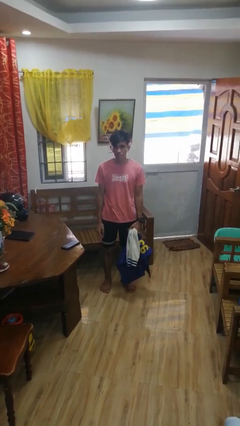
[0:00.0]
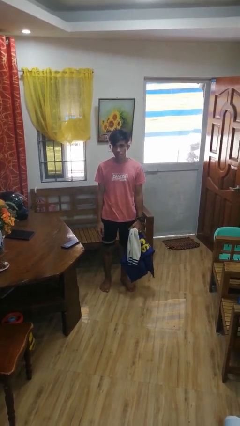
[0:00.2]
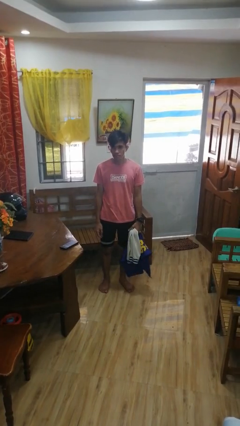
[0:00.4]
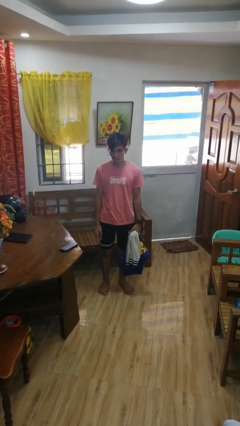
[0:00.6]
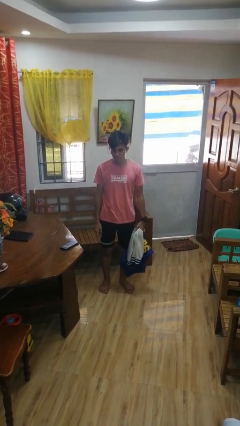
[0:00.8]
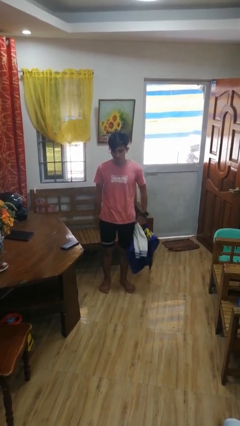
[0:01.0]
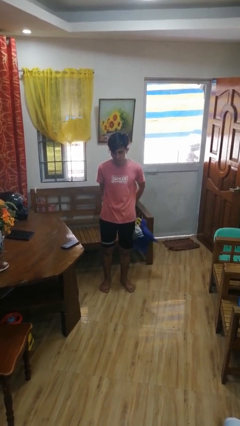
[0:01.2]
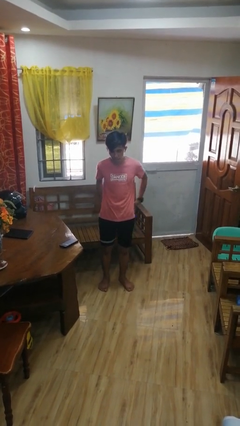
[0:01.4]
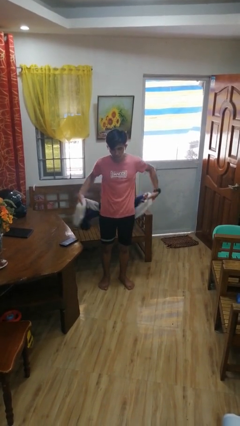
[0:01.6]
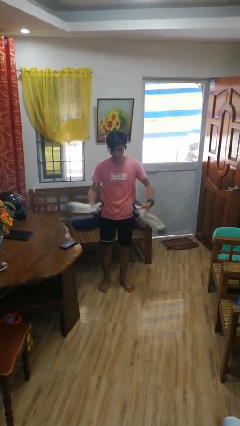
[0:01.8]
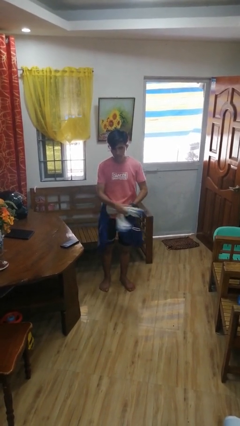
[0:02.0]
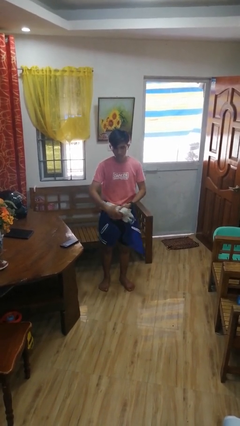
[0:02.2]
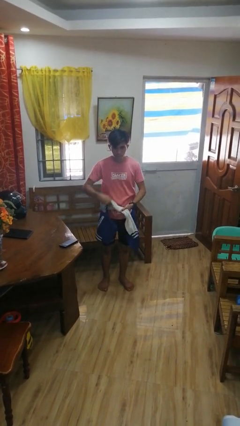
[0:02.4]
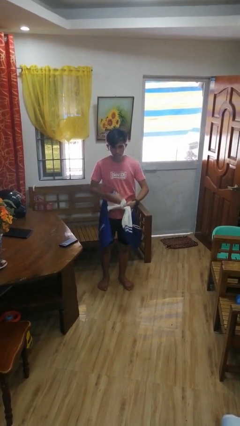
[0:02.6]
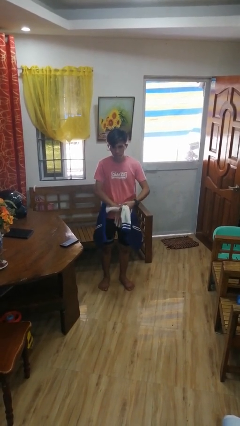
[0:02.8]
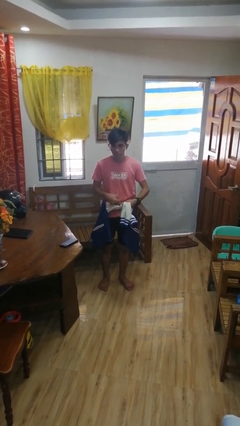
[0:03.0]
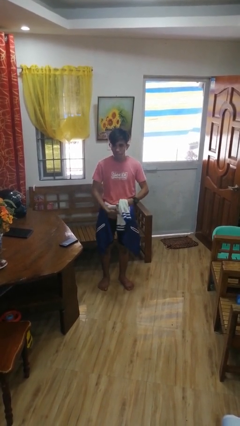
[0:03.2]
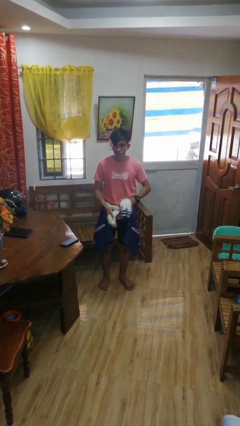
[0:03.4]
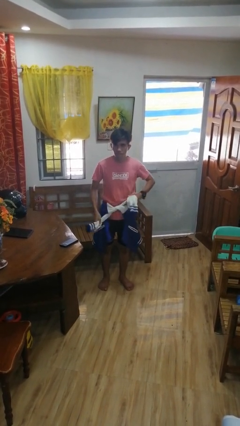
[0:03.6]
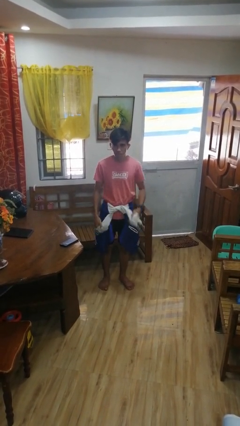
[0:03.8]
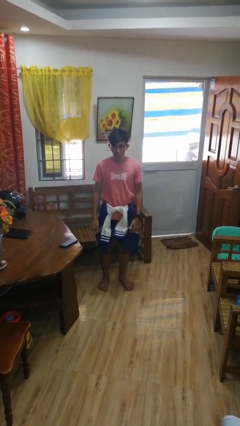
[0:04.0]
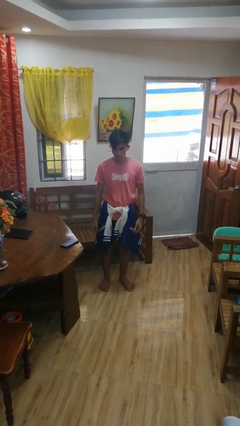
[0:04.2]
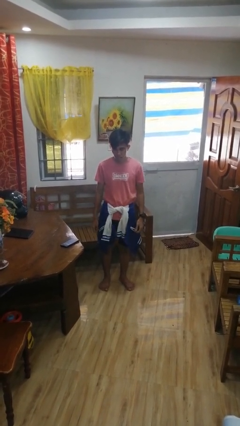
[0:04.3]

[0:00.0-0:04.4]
person ties jacket around waist

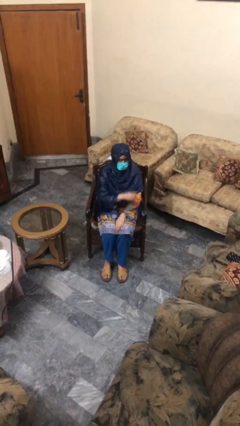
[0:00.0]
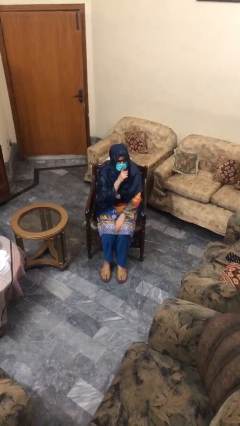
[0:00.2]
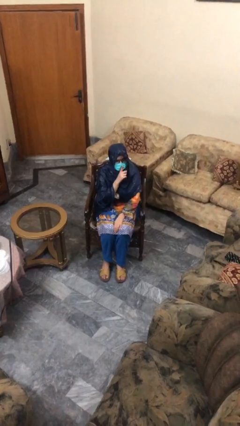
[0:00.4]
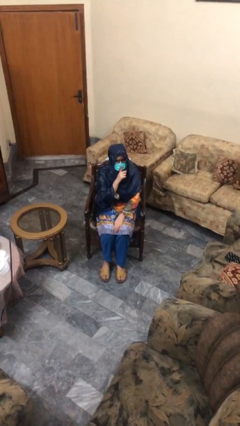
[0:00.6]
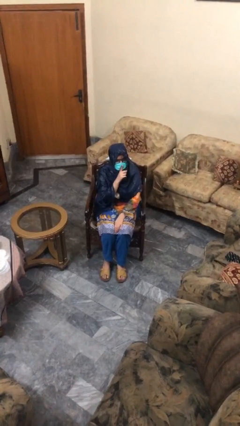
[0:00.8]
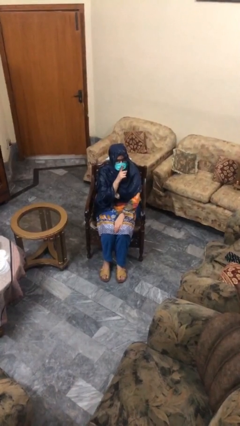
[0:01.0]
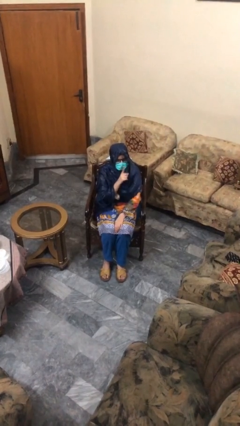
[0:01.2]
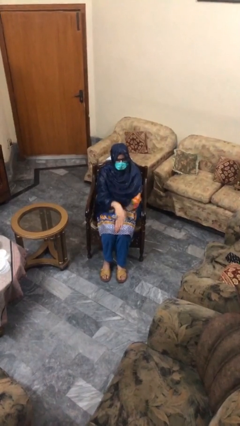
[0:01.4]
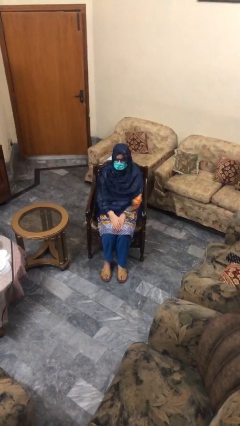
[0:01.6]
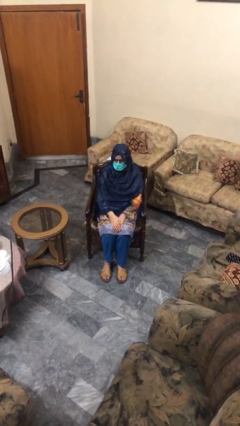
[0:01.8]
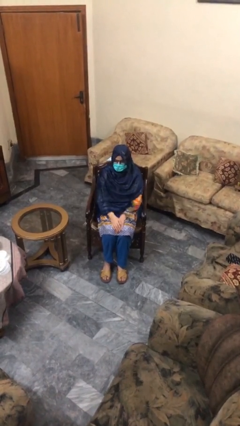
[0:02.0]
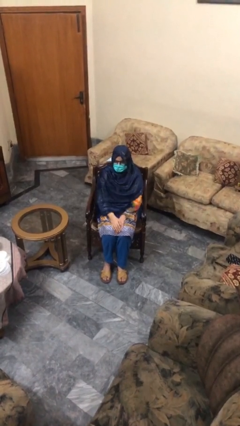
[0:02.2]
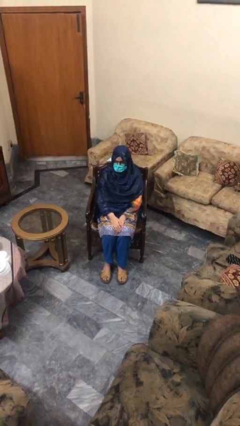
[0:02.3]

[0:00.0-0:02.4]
person gestures be quiet

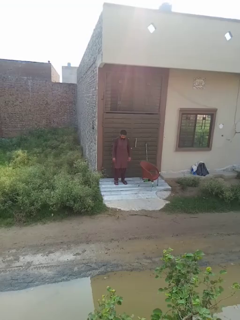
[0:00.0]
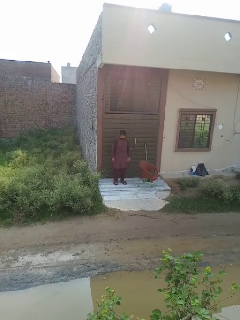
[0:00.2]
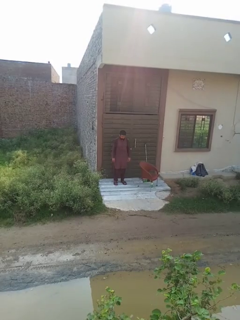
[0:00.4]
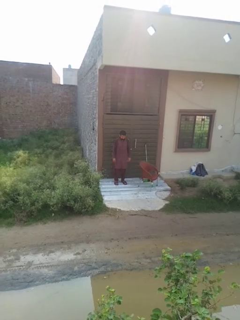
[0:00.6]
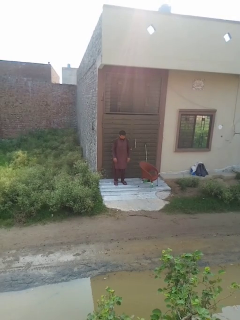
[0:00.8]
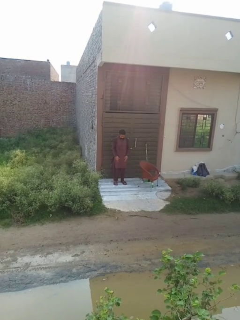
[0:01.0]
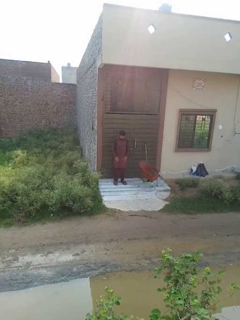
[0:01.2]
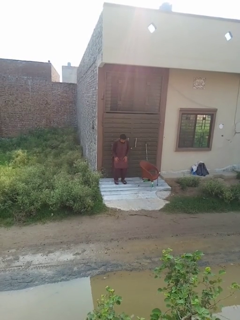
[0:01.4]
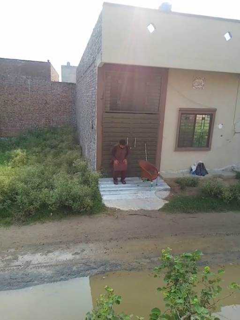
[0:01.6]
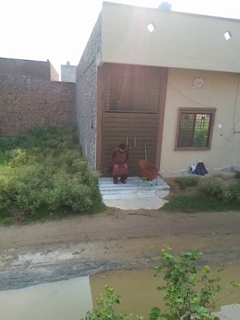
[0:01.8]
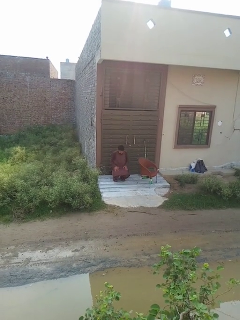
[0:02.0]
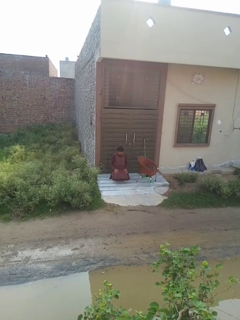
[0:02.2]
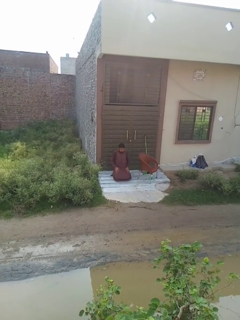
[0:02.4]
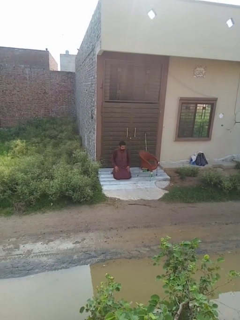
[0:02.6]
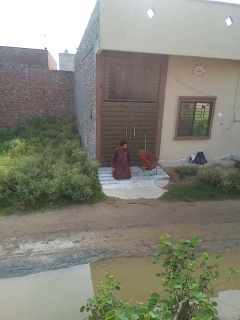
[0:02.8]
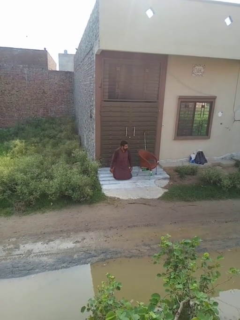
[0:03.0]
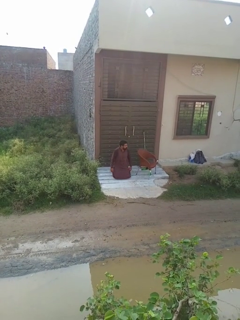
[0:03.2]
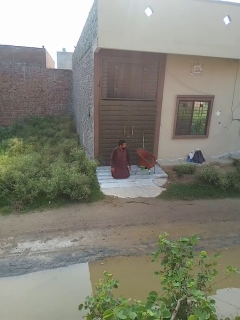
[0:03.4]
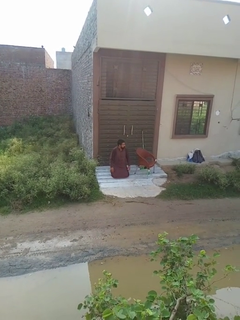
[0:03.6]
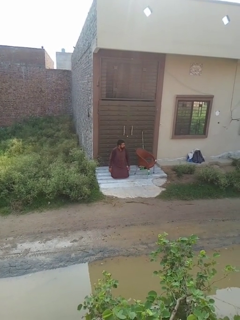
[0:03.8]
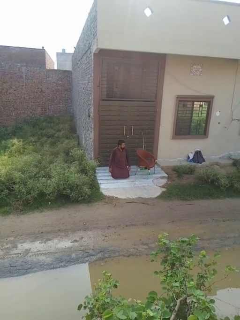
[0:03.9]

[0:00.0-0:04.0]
person kneels

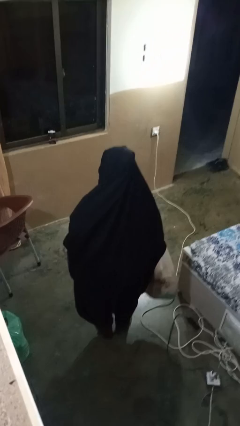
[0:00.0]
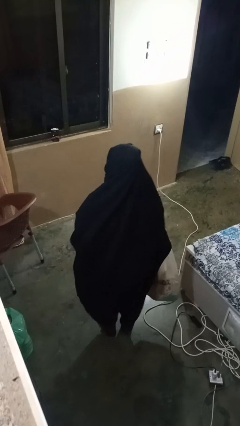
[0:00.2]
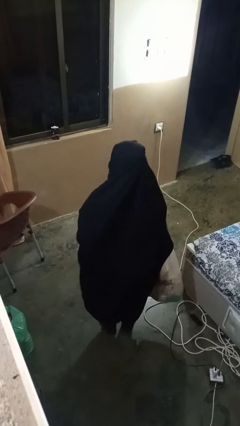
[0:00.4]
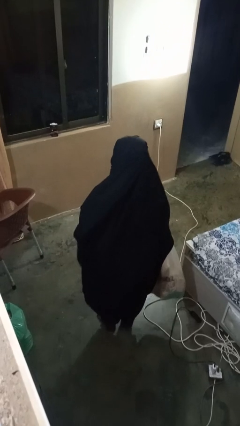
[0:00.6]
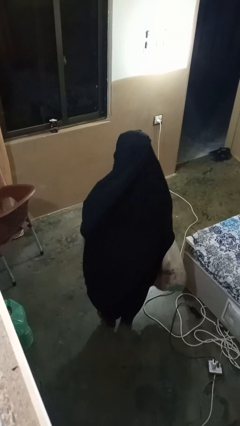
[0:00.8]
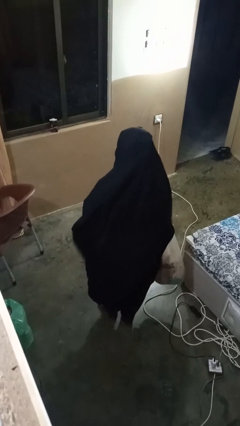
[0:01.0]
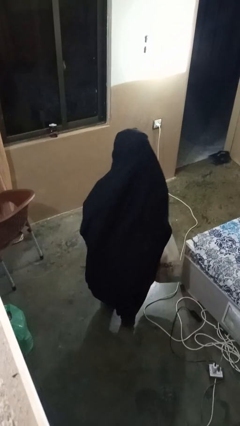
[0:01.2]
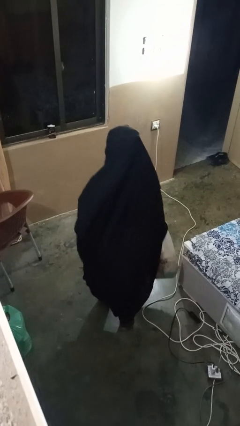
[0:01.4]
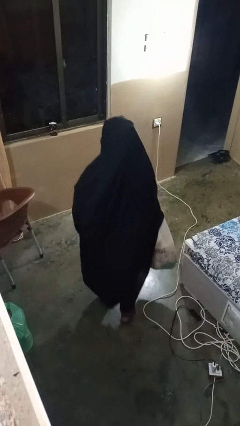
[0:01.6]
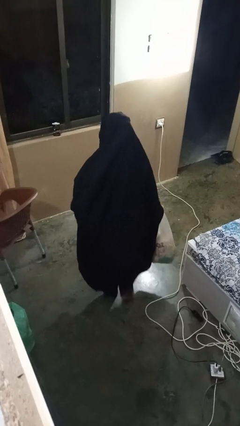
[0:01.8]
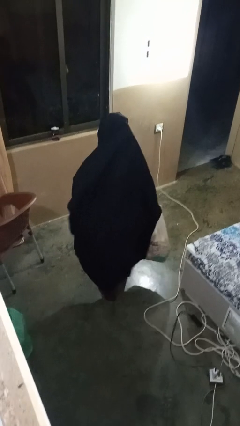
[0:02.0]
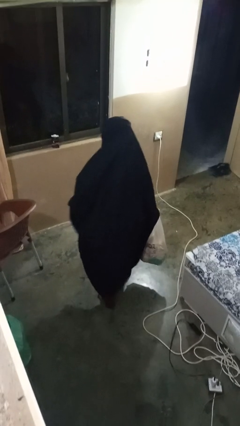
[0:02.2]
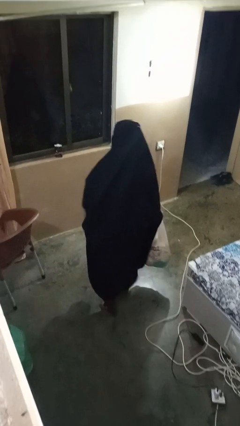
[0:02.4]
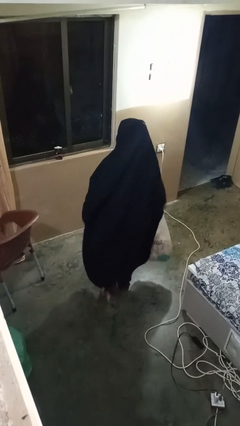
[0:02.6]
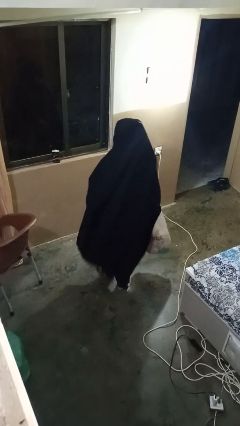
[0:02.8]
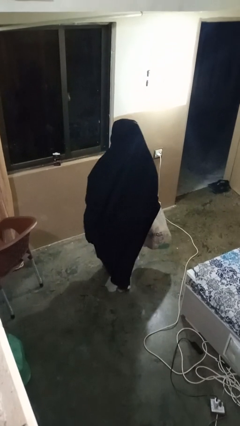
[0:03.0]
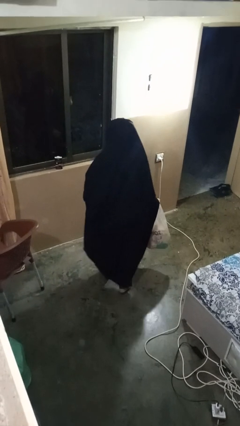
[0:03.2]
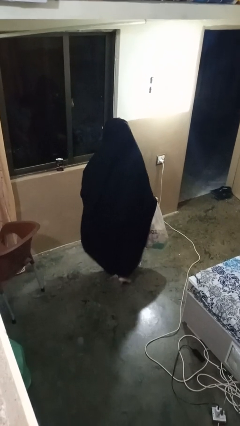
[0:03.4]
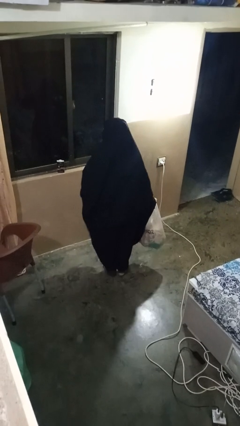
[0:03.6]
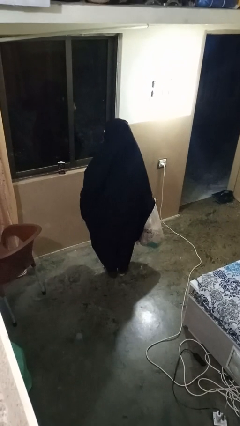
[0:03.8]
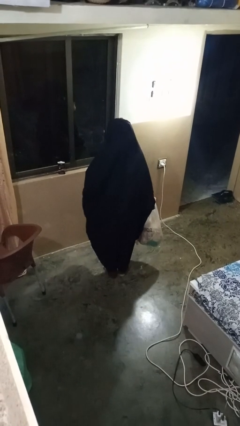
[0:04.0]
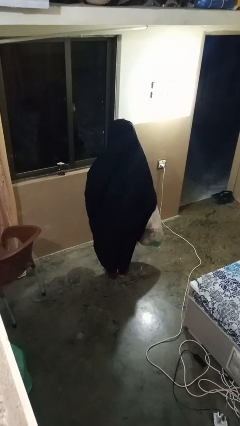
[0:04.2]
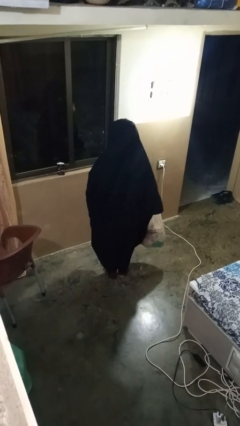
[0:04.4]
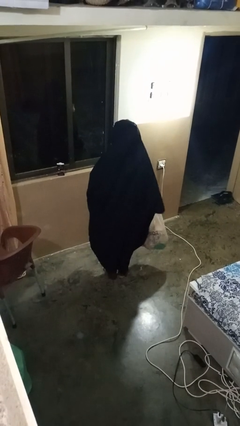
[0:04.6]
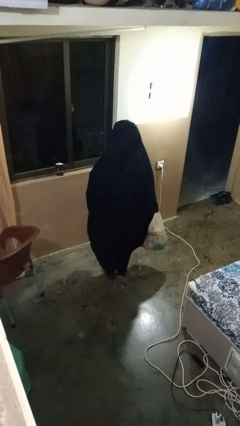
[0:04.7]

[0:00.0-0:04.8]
person carries groceries

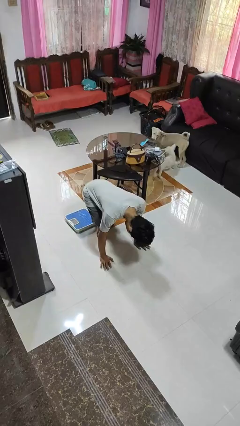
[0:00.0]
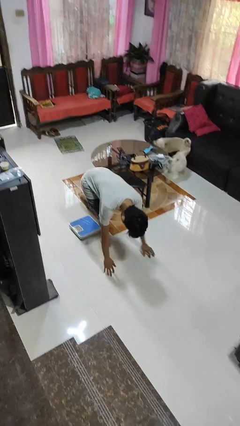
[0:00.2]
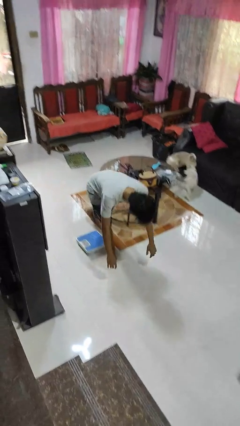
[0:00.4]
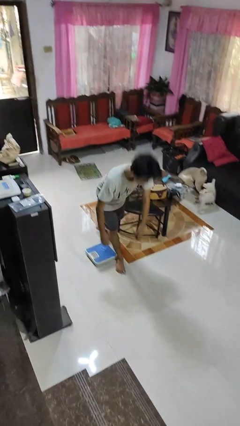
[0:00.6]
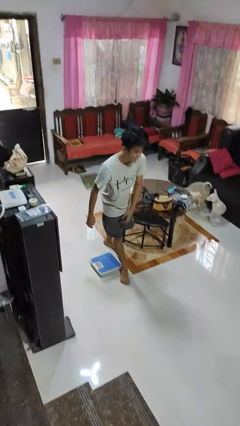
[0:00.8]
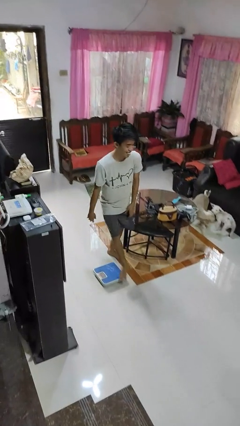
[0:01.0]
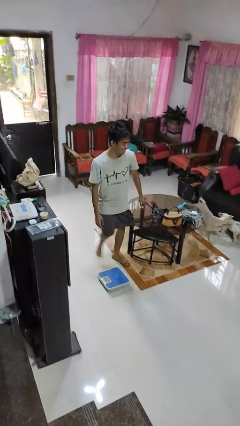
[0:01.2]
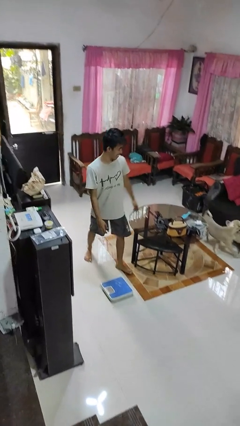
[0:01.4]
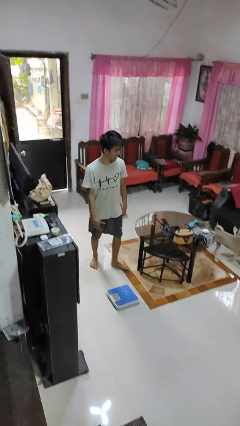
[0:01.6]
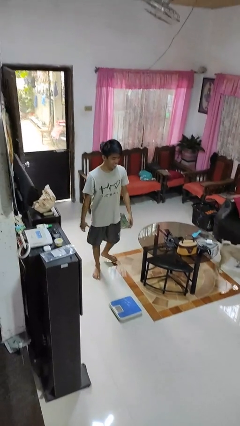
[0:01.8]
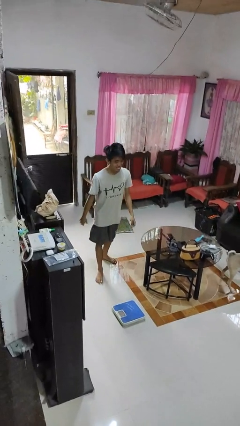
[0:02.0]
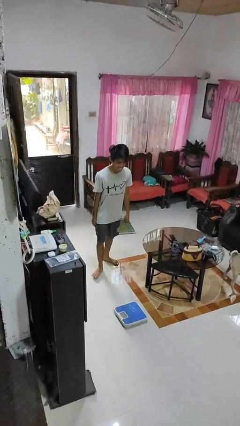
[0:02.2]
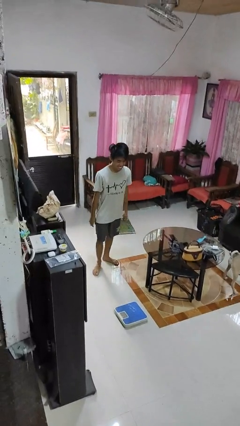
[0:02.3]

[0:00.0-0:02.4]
person stands up from floor

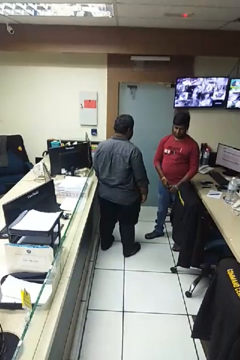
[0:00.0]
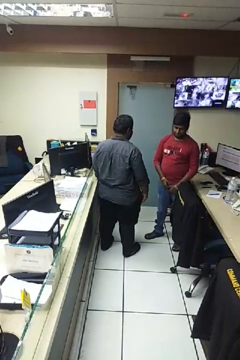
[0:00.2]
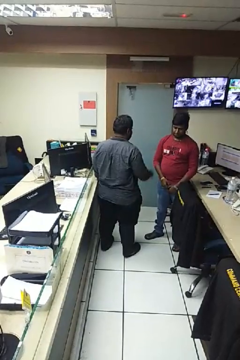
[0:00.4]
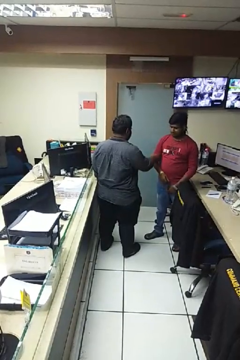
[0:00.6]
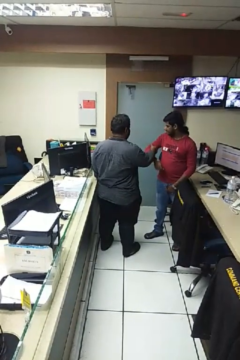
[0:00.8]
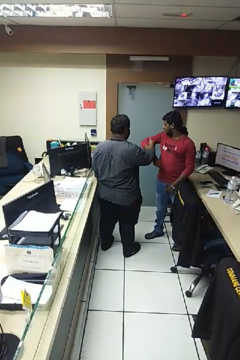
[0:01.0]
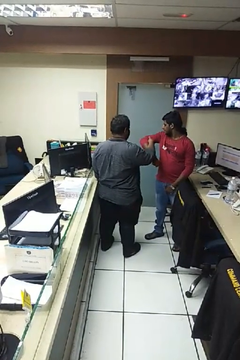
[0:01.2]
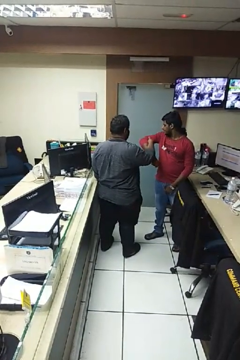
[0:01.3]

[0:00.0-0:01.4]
person grabs person by bicep
